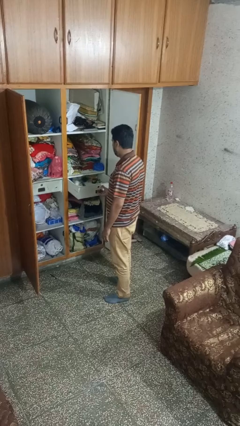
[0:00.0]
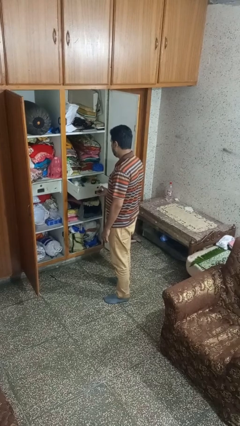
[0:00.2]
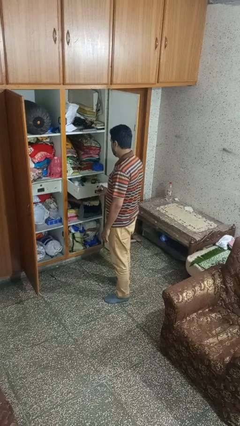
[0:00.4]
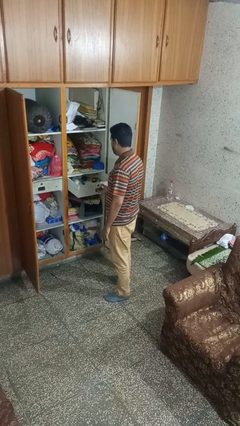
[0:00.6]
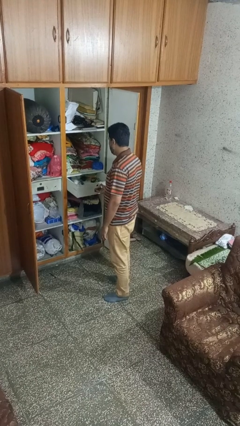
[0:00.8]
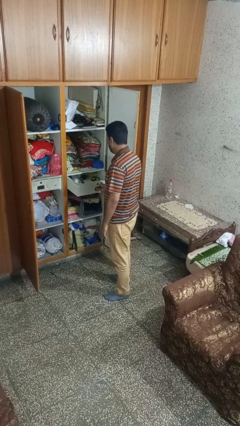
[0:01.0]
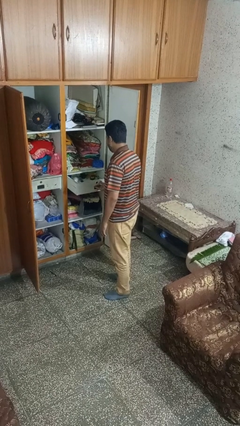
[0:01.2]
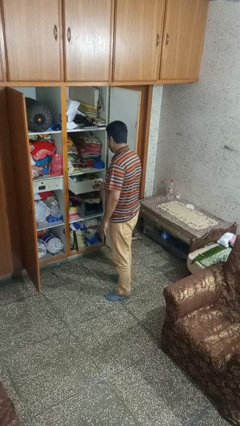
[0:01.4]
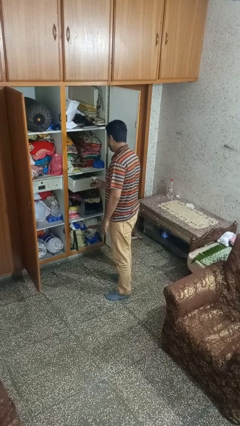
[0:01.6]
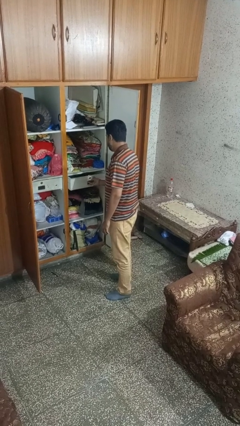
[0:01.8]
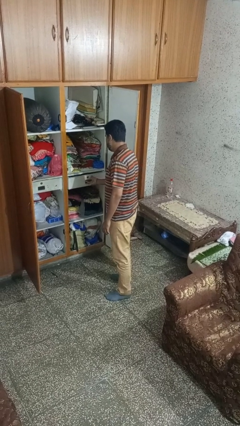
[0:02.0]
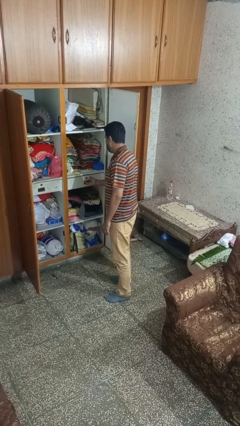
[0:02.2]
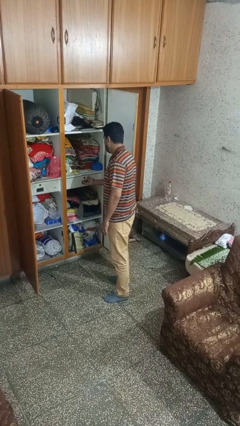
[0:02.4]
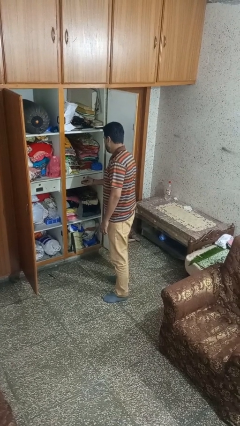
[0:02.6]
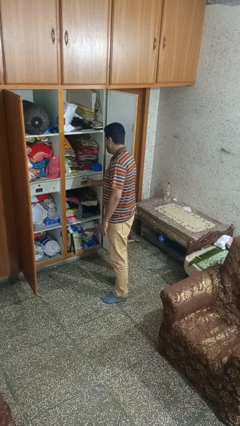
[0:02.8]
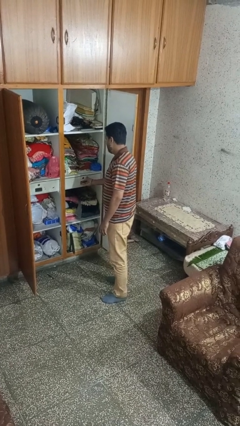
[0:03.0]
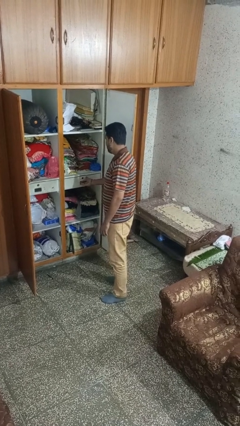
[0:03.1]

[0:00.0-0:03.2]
person closes dresser drawer

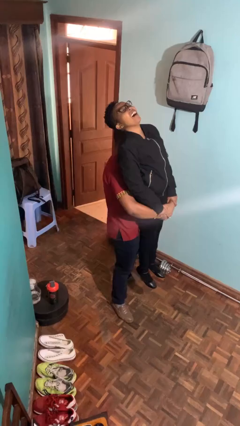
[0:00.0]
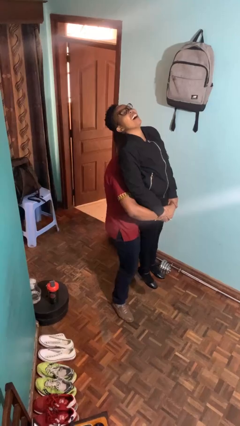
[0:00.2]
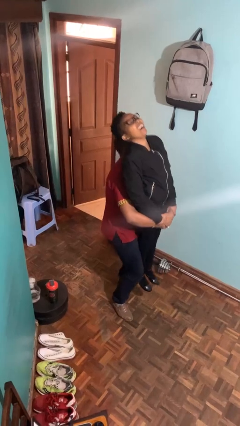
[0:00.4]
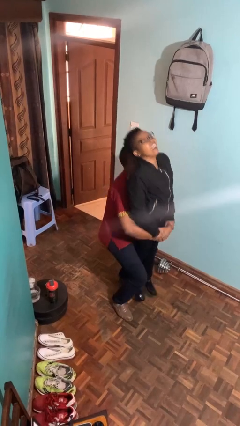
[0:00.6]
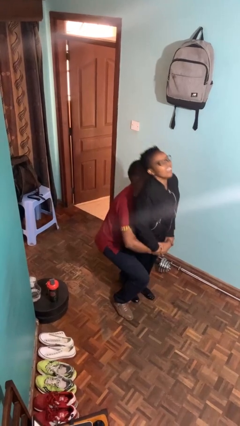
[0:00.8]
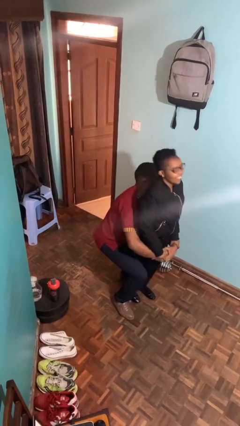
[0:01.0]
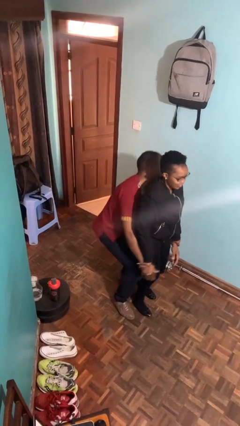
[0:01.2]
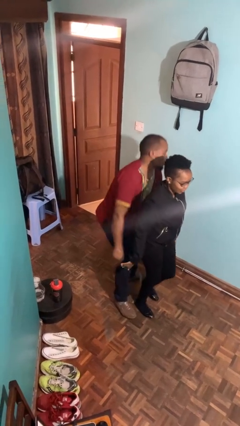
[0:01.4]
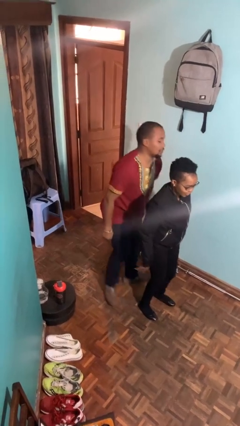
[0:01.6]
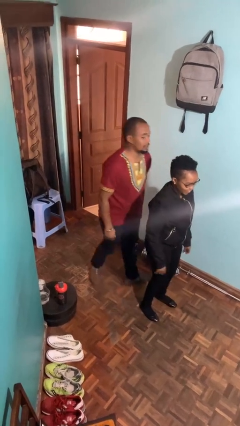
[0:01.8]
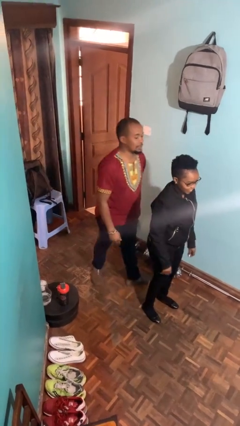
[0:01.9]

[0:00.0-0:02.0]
person puts down person

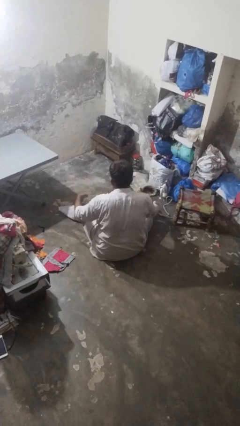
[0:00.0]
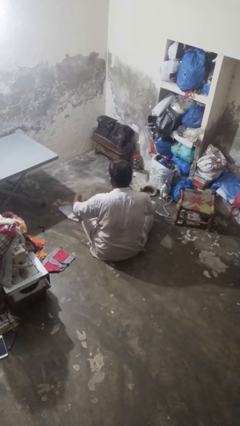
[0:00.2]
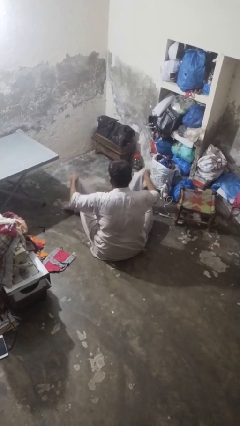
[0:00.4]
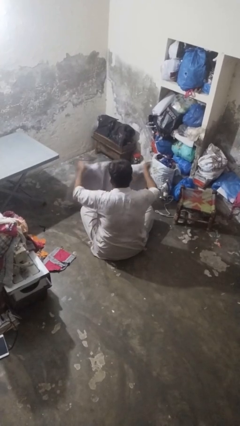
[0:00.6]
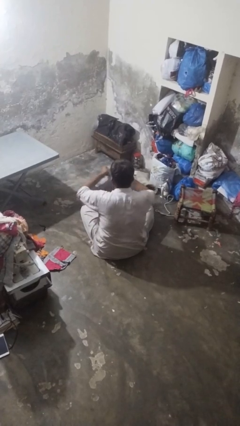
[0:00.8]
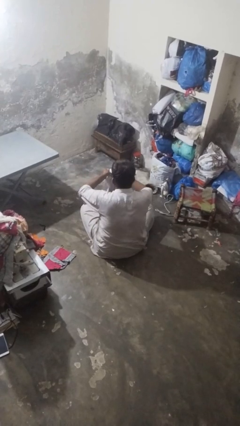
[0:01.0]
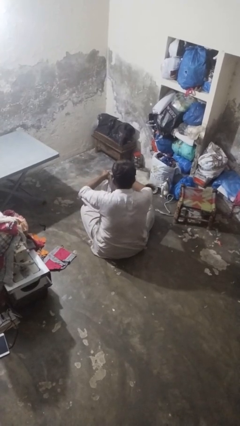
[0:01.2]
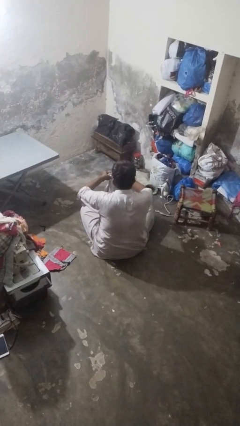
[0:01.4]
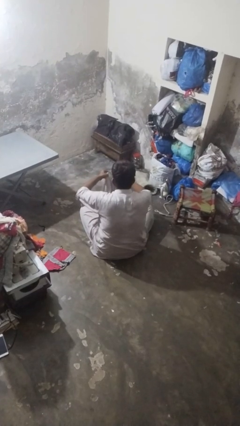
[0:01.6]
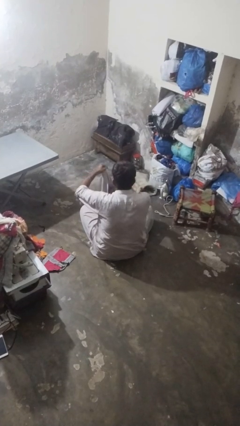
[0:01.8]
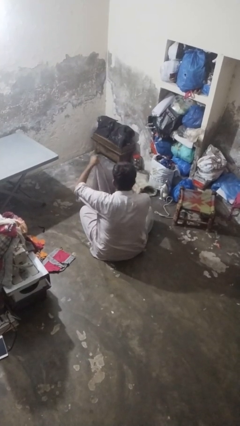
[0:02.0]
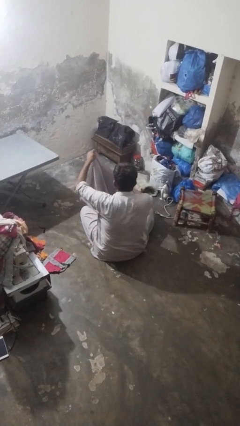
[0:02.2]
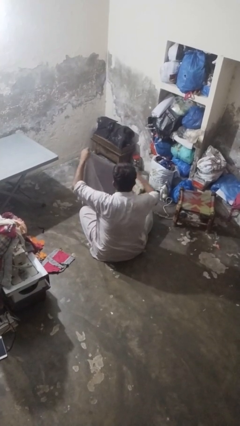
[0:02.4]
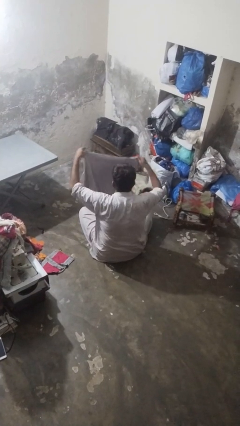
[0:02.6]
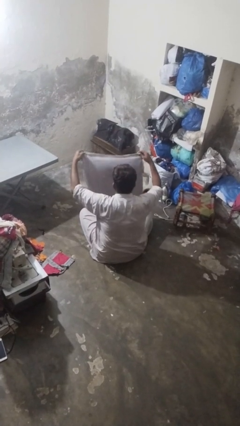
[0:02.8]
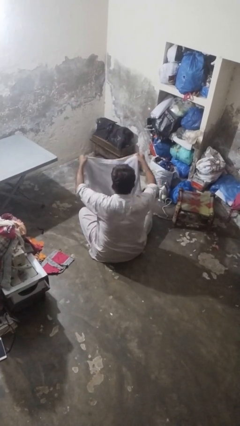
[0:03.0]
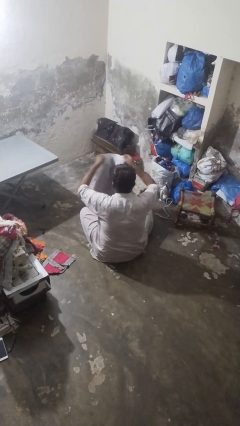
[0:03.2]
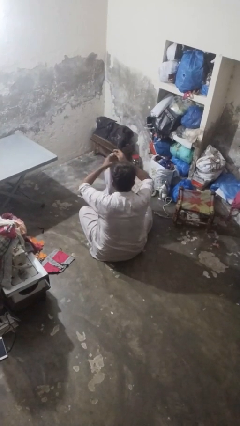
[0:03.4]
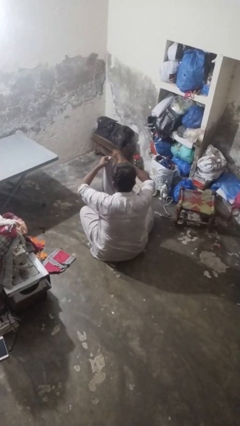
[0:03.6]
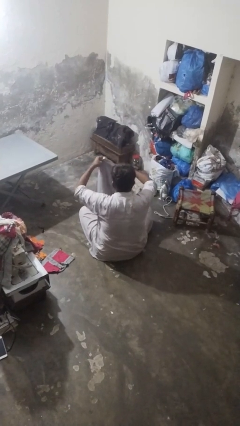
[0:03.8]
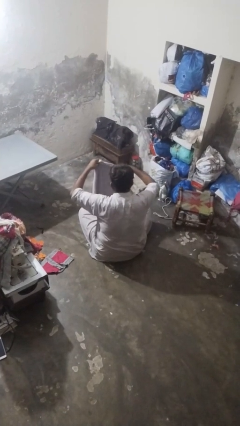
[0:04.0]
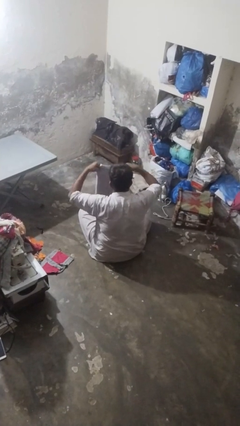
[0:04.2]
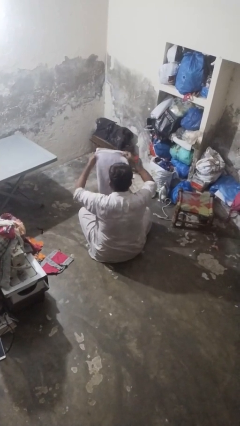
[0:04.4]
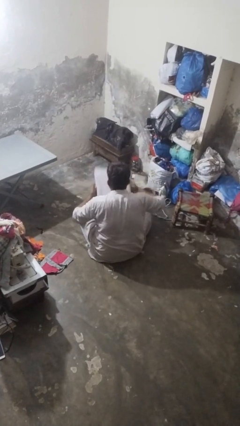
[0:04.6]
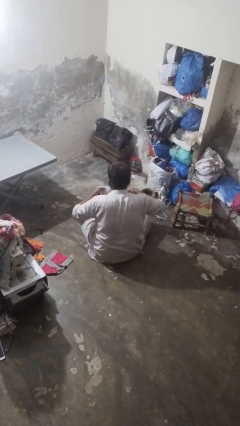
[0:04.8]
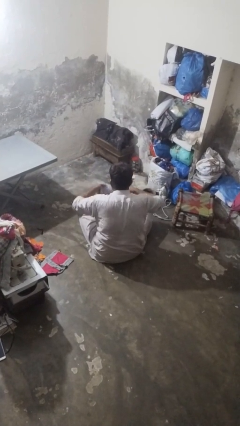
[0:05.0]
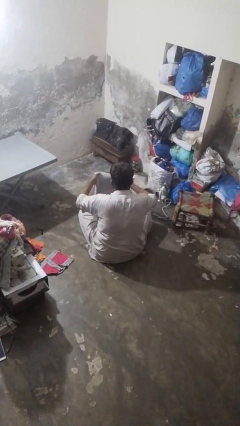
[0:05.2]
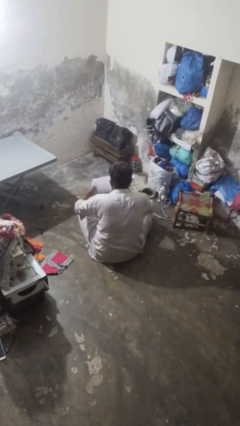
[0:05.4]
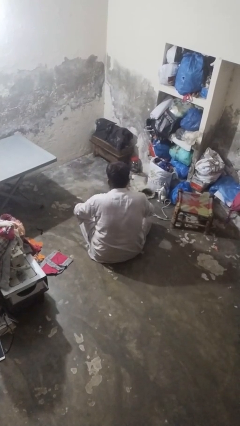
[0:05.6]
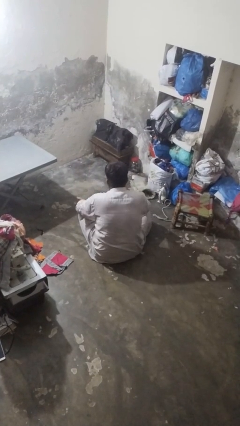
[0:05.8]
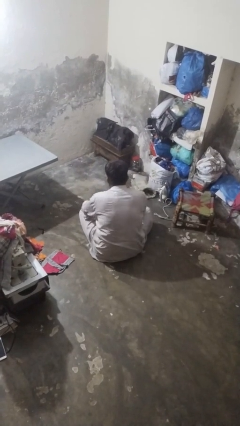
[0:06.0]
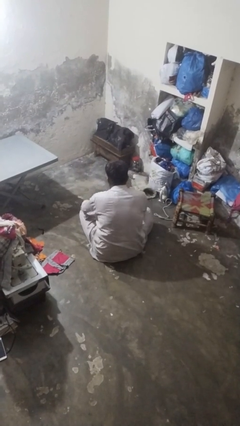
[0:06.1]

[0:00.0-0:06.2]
person folds towel

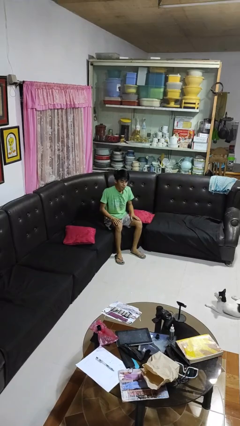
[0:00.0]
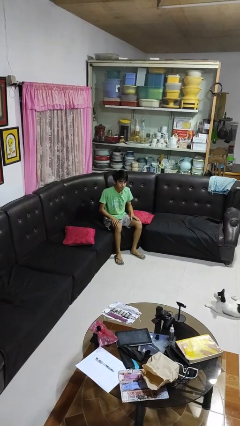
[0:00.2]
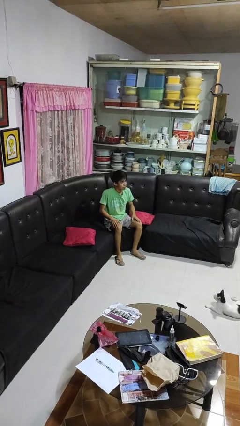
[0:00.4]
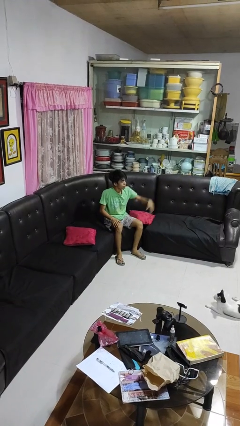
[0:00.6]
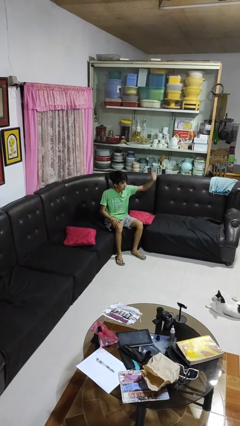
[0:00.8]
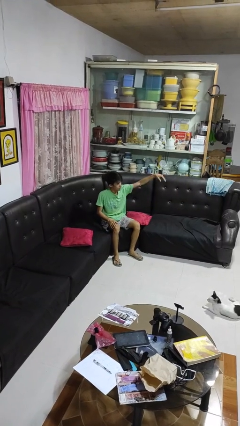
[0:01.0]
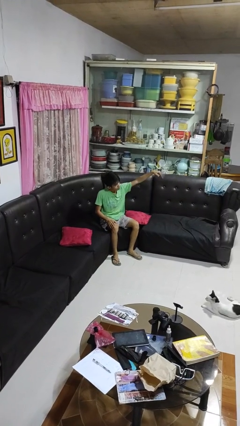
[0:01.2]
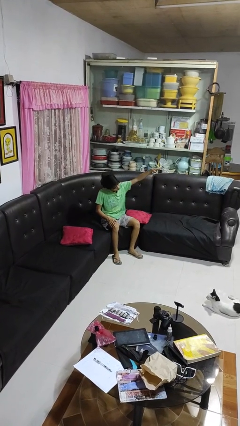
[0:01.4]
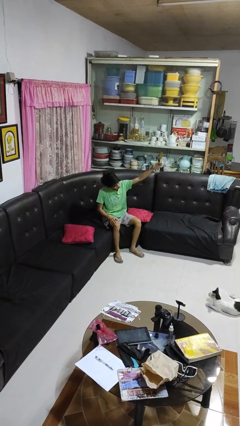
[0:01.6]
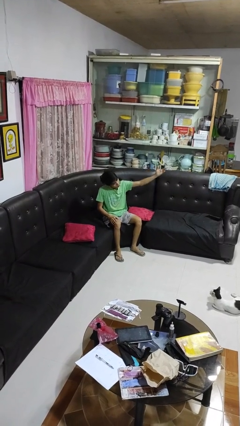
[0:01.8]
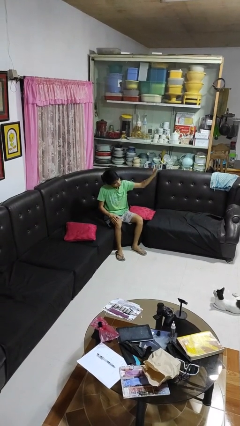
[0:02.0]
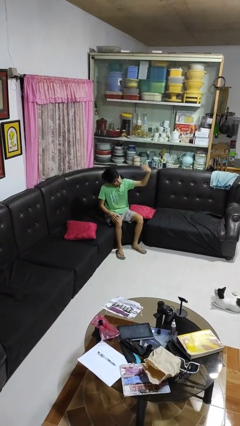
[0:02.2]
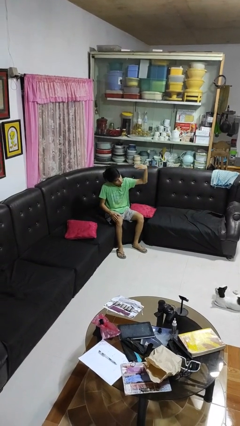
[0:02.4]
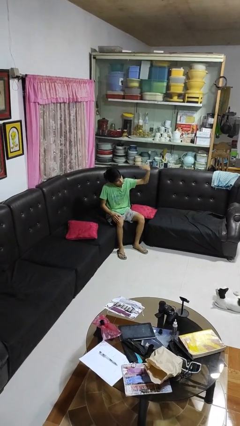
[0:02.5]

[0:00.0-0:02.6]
person gestures come here

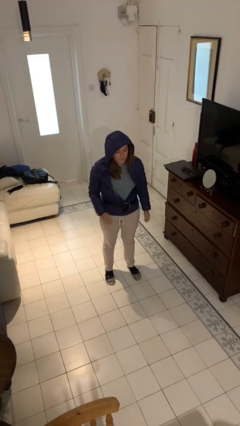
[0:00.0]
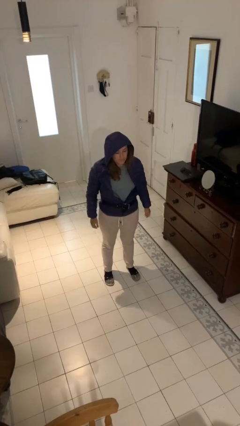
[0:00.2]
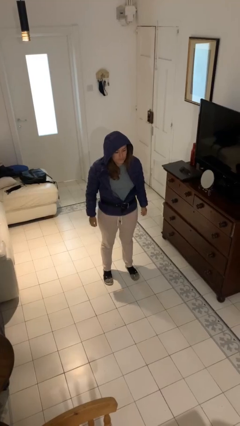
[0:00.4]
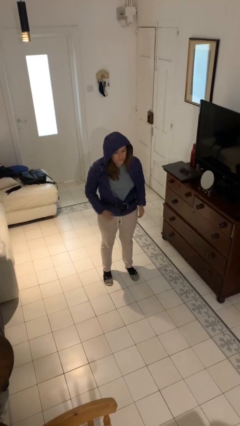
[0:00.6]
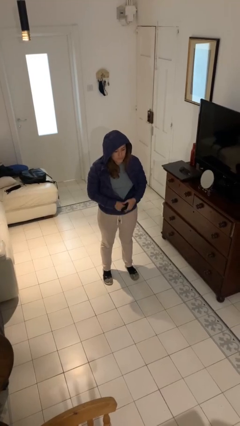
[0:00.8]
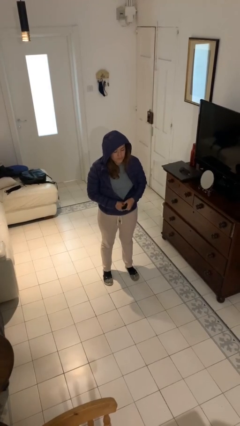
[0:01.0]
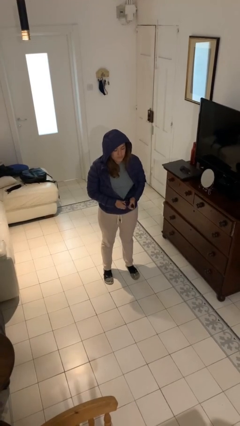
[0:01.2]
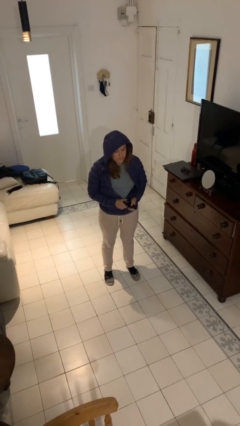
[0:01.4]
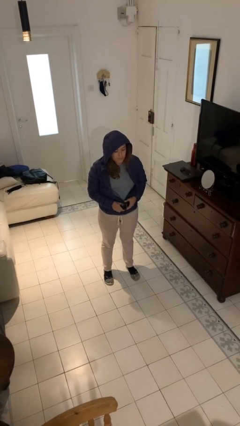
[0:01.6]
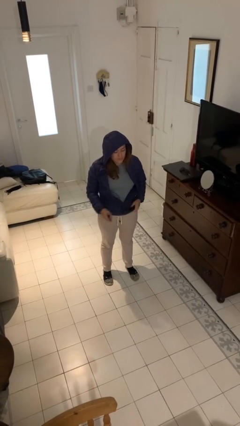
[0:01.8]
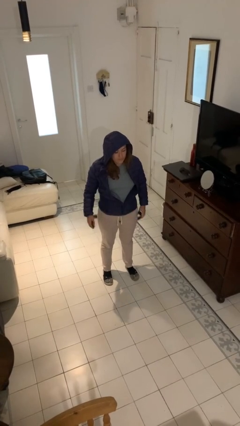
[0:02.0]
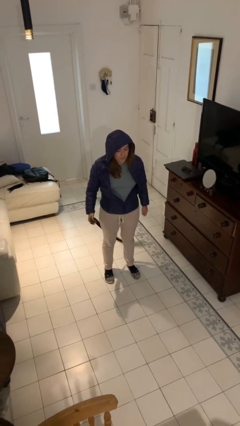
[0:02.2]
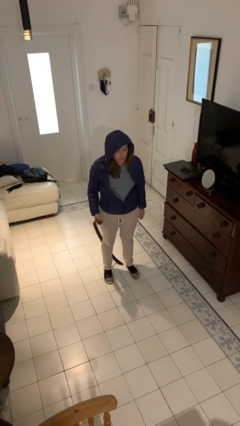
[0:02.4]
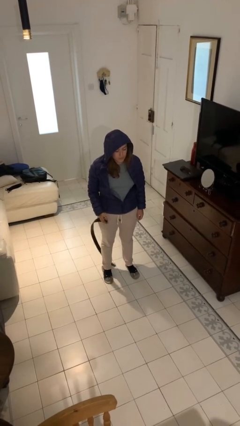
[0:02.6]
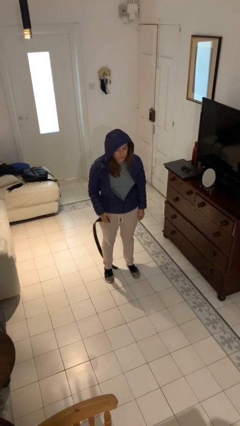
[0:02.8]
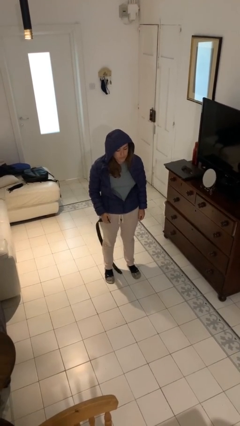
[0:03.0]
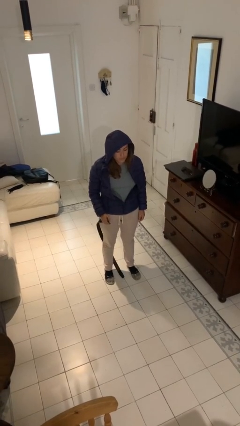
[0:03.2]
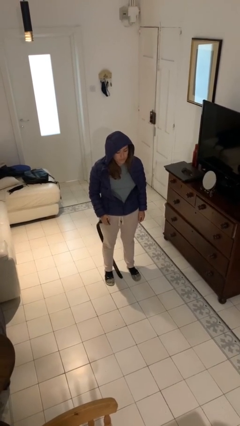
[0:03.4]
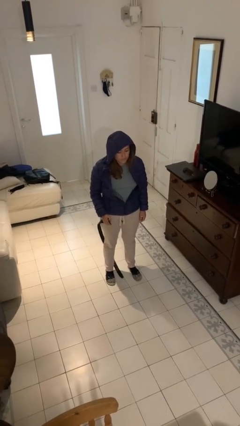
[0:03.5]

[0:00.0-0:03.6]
person takes off belt
